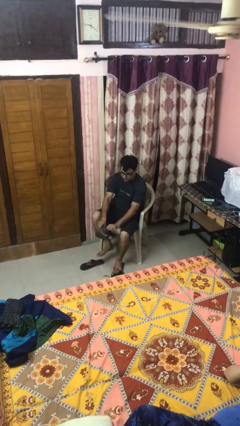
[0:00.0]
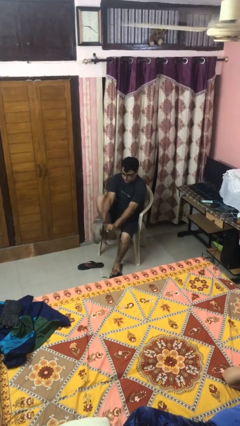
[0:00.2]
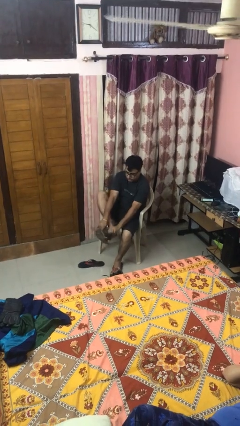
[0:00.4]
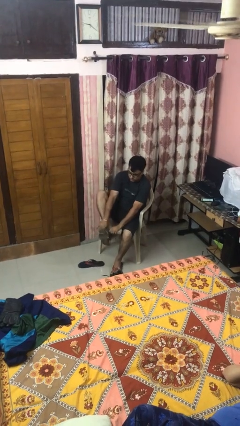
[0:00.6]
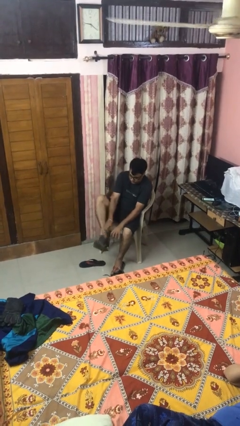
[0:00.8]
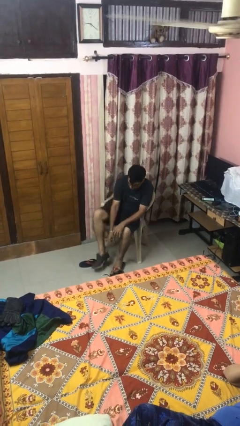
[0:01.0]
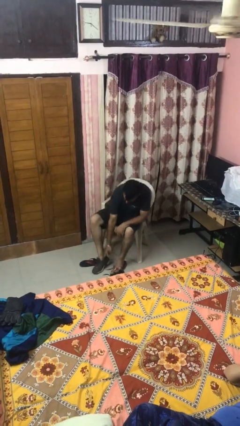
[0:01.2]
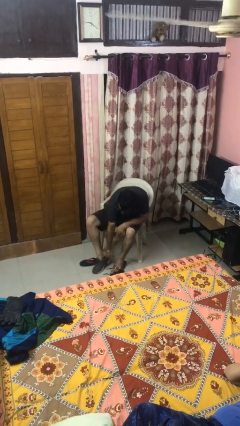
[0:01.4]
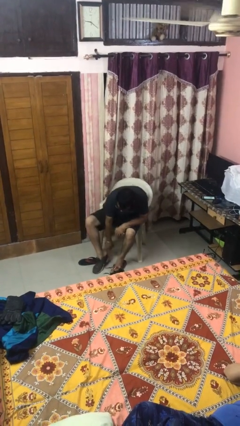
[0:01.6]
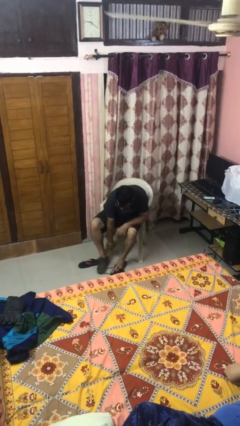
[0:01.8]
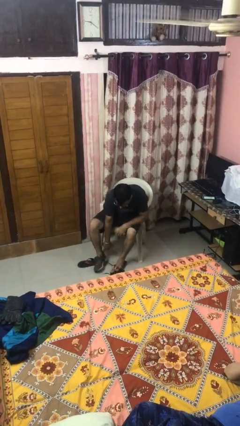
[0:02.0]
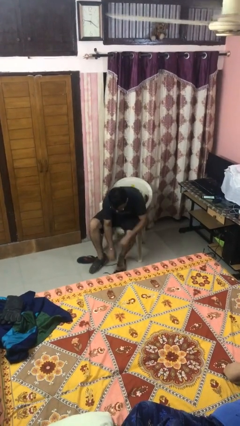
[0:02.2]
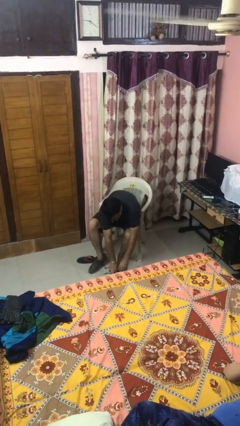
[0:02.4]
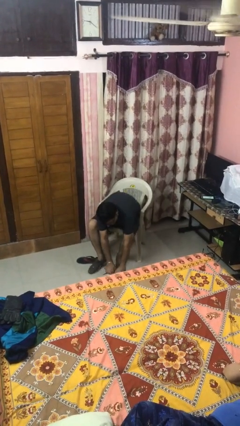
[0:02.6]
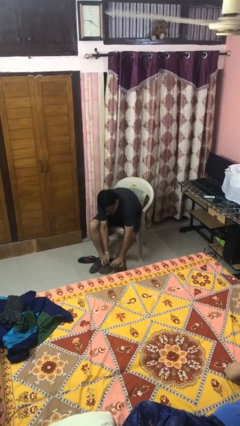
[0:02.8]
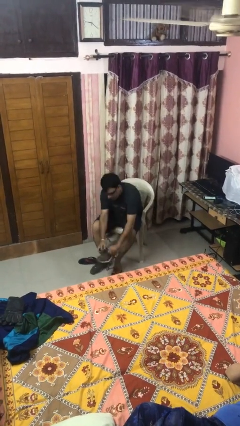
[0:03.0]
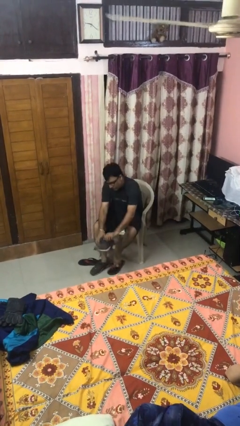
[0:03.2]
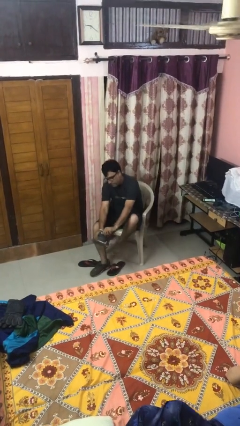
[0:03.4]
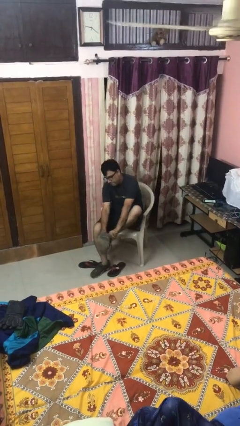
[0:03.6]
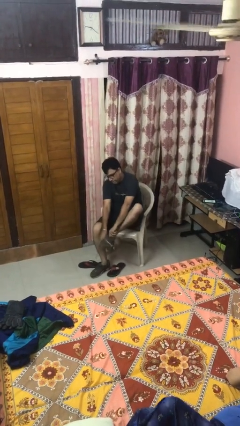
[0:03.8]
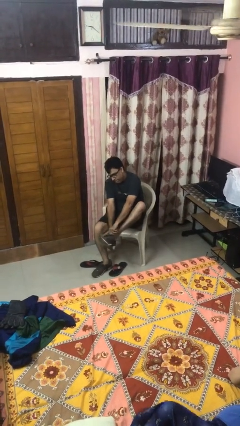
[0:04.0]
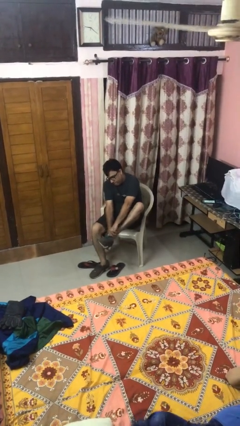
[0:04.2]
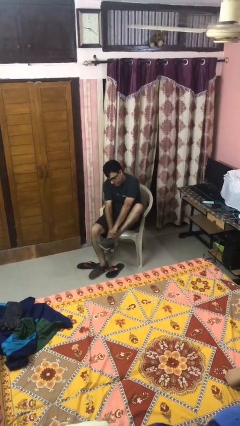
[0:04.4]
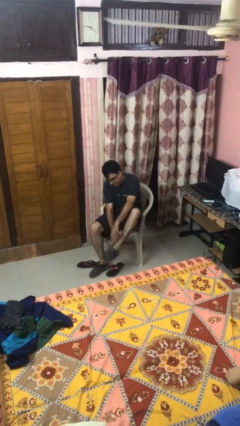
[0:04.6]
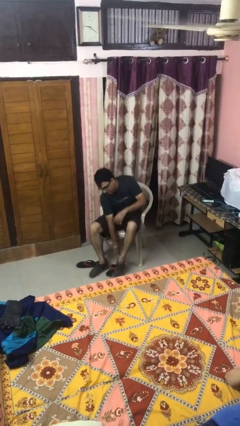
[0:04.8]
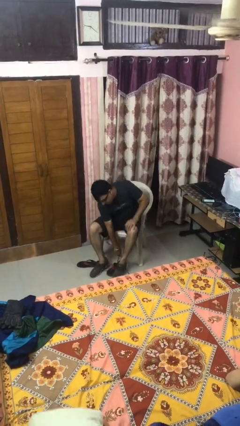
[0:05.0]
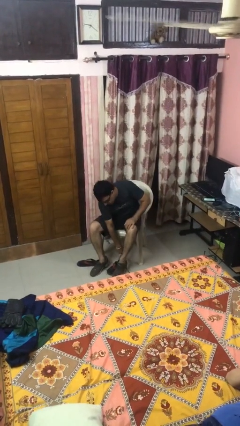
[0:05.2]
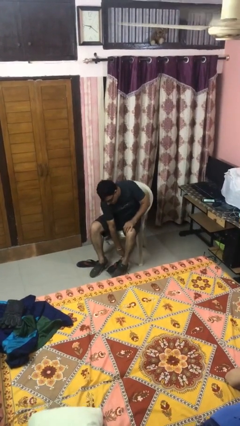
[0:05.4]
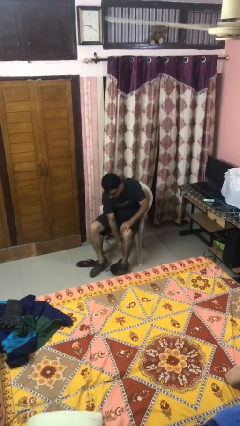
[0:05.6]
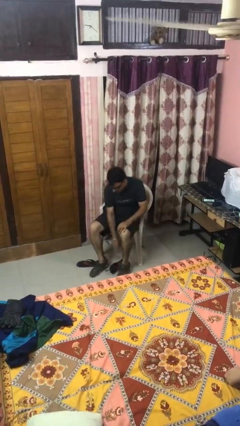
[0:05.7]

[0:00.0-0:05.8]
person puts on shoes

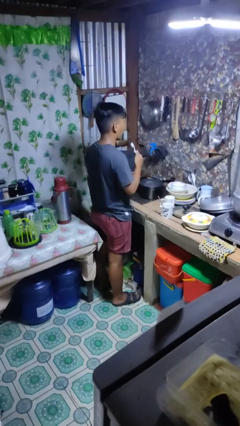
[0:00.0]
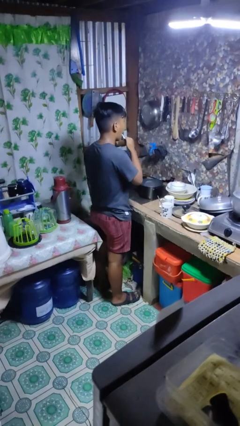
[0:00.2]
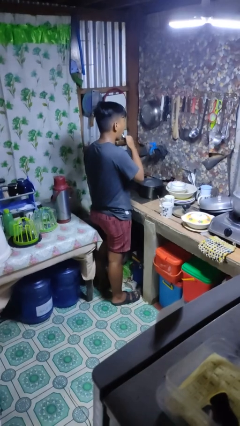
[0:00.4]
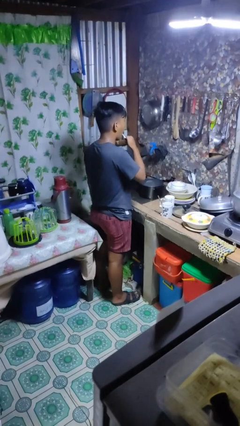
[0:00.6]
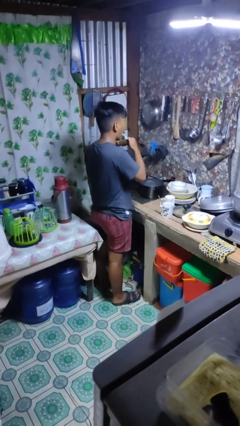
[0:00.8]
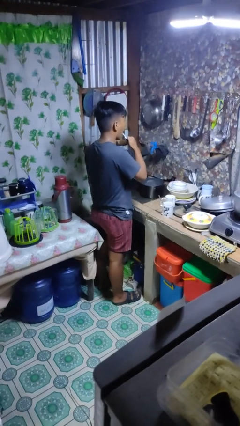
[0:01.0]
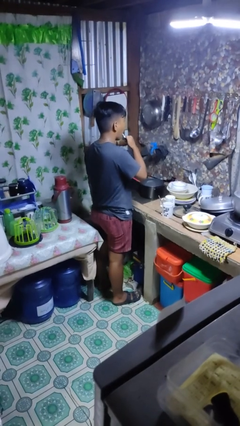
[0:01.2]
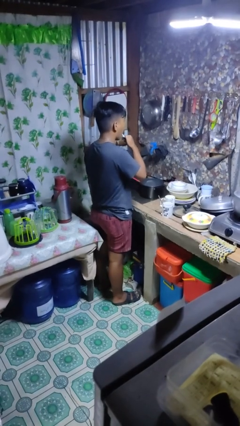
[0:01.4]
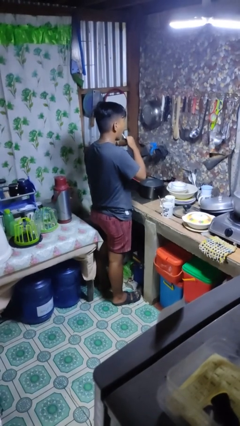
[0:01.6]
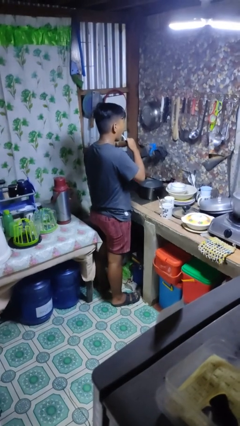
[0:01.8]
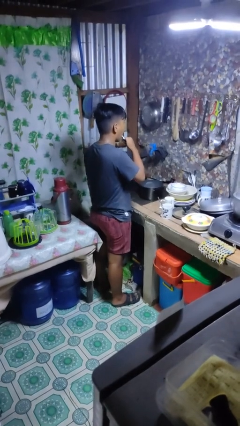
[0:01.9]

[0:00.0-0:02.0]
person brushes teeth

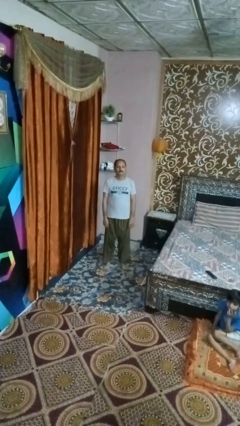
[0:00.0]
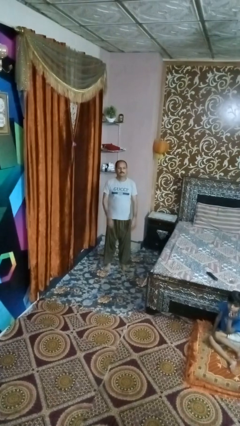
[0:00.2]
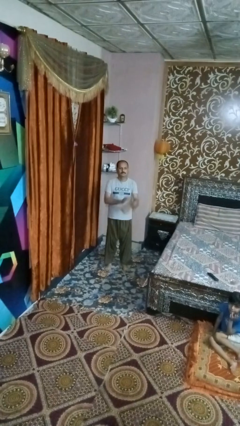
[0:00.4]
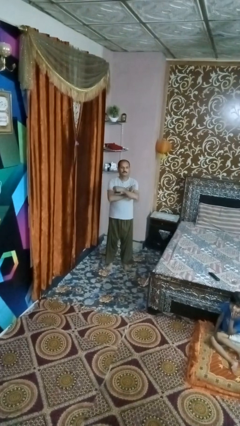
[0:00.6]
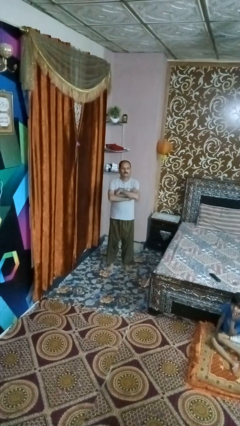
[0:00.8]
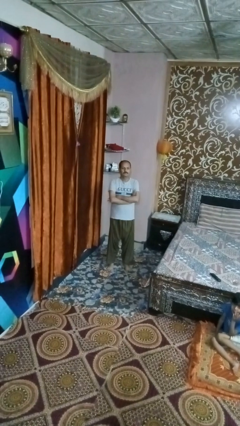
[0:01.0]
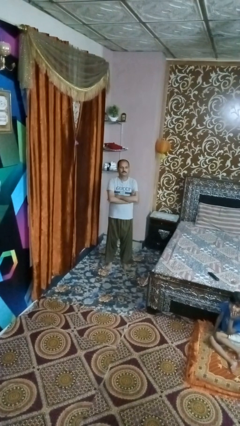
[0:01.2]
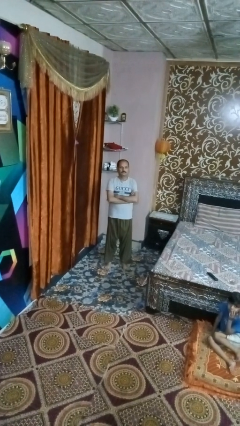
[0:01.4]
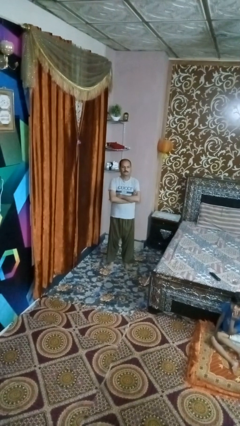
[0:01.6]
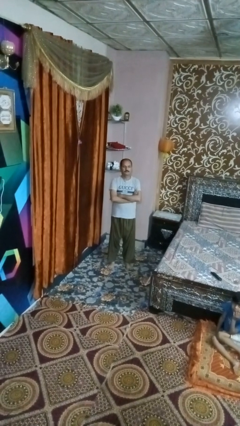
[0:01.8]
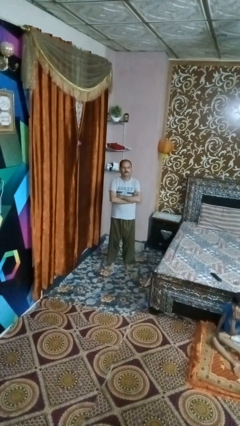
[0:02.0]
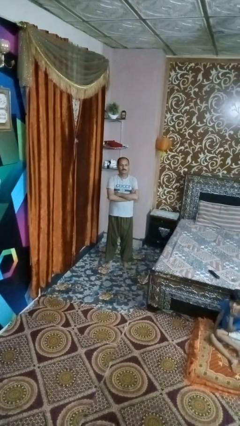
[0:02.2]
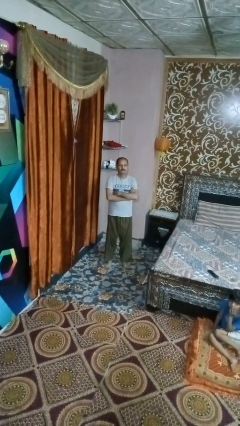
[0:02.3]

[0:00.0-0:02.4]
person crosses arms

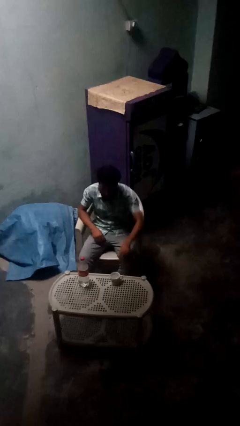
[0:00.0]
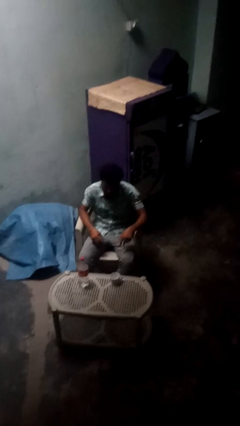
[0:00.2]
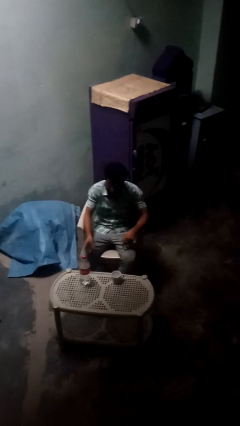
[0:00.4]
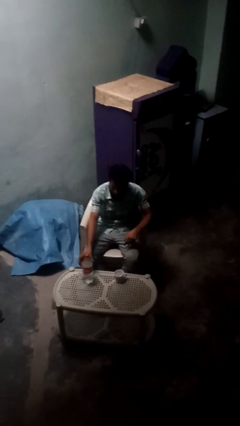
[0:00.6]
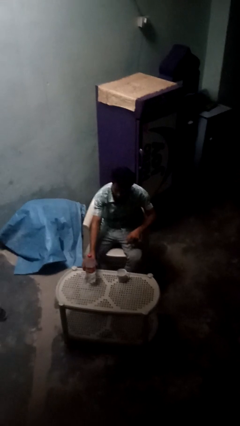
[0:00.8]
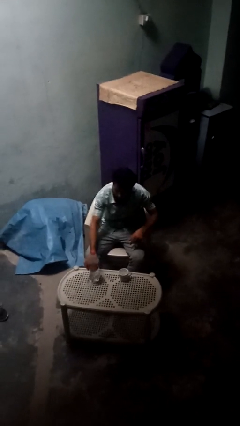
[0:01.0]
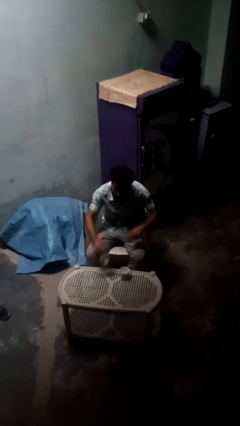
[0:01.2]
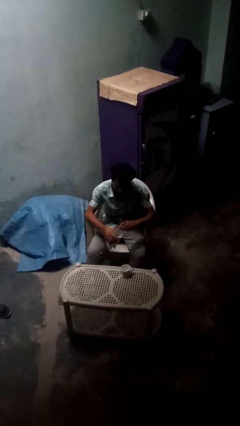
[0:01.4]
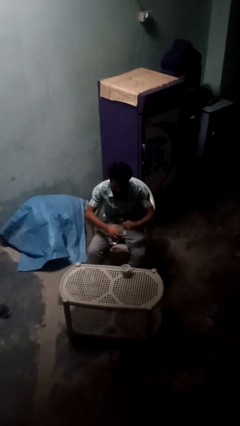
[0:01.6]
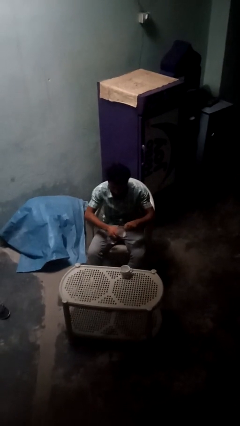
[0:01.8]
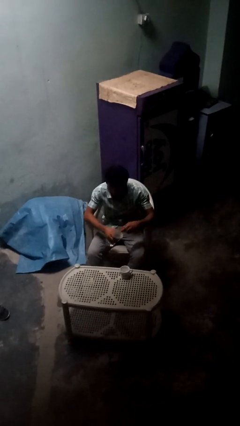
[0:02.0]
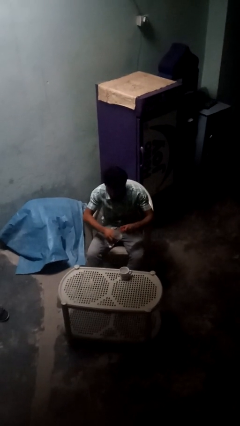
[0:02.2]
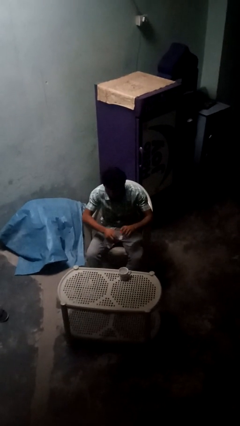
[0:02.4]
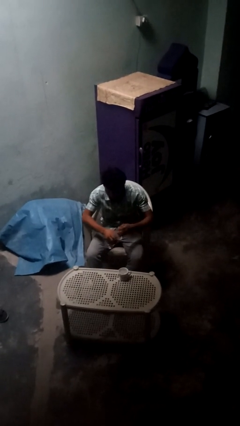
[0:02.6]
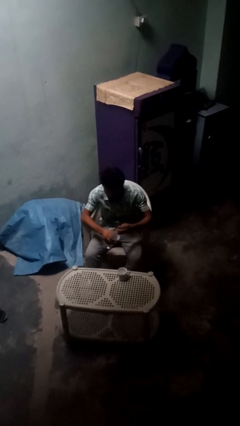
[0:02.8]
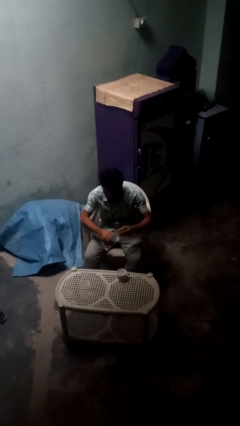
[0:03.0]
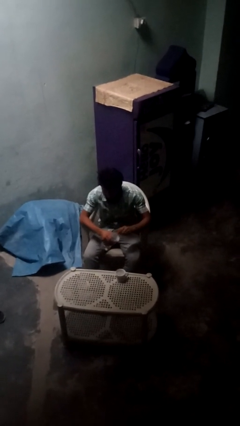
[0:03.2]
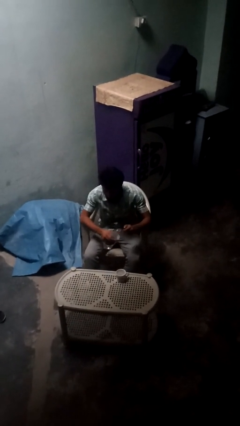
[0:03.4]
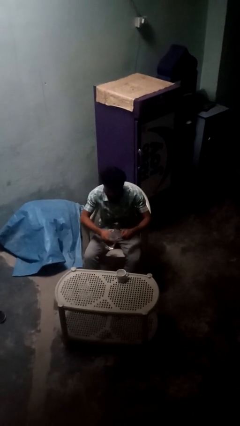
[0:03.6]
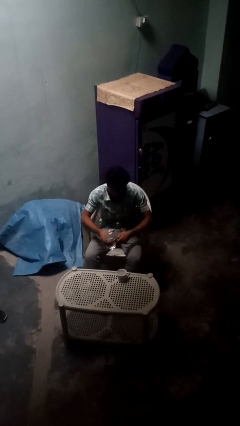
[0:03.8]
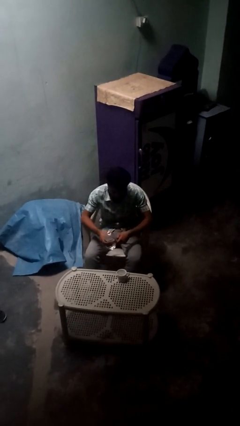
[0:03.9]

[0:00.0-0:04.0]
person unscrews lid from bottle

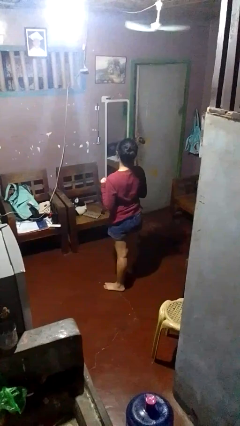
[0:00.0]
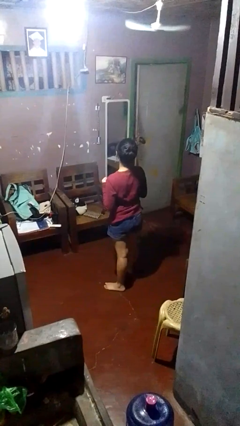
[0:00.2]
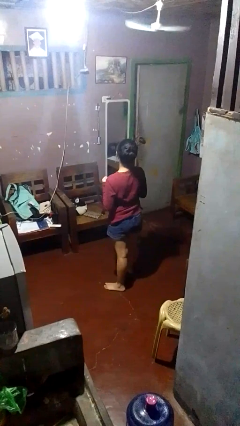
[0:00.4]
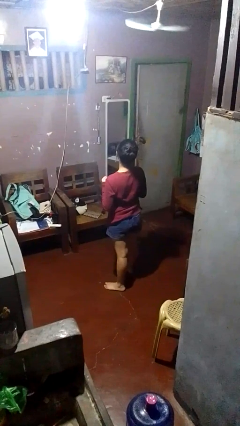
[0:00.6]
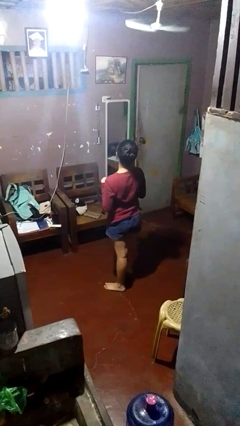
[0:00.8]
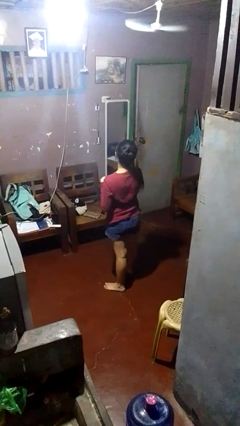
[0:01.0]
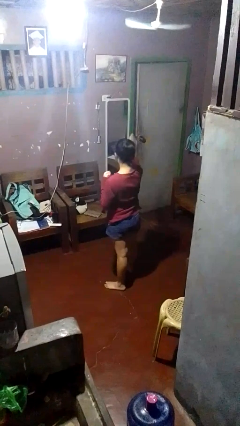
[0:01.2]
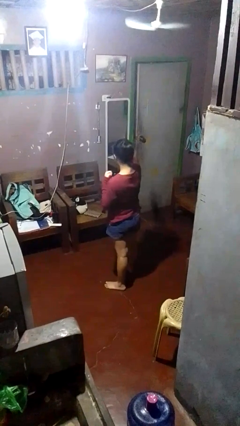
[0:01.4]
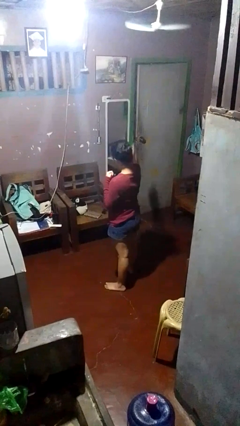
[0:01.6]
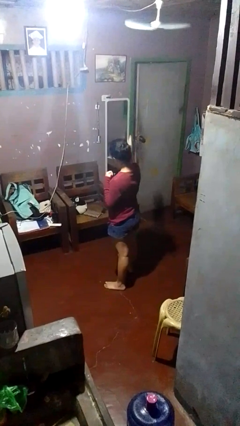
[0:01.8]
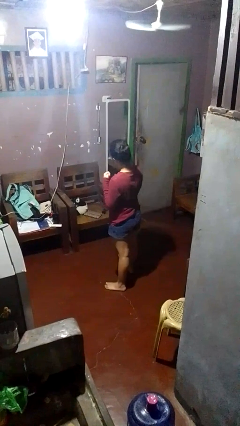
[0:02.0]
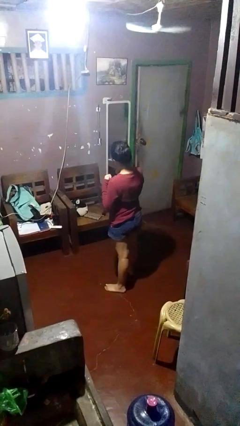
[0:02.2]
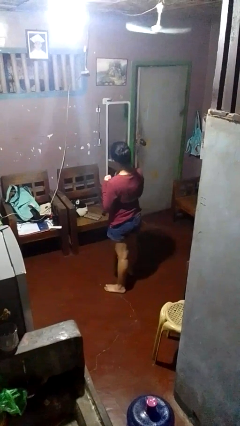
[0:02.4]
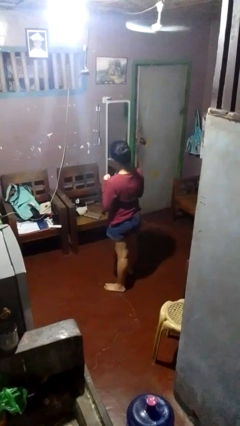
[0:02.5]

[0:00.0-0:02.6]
person karate chop

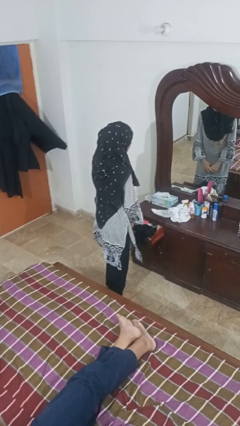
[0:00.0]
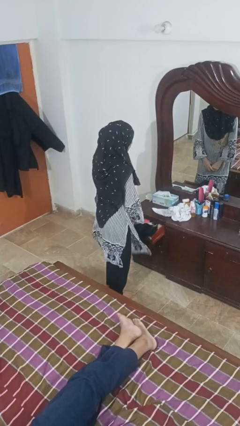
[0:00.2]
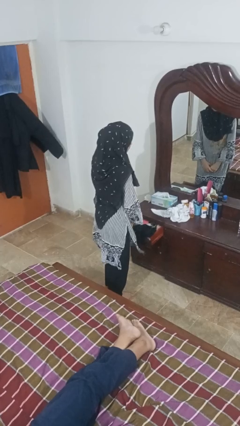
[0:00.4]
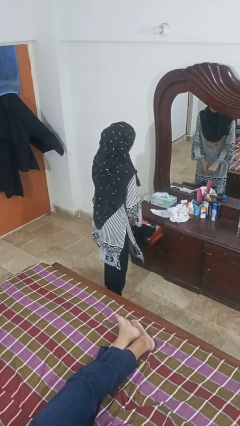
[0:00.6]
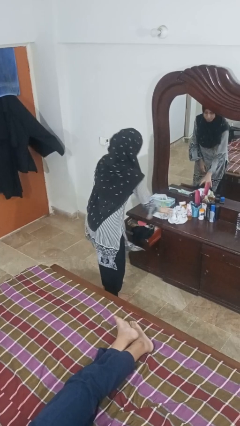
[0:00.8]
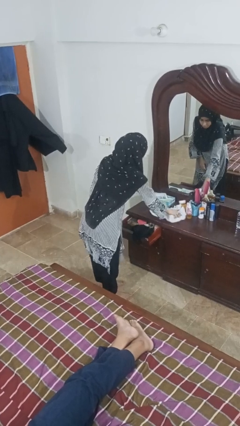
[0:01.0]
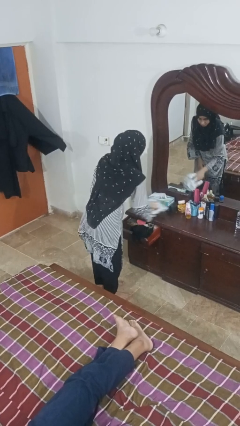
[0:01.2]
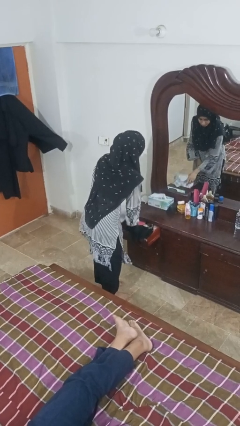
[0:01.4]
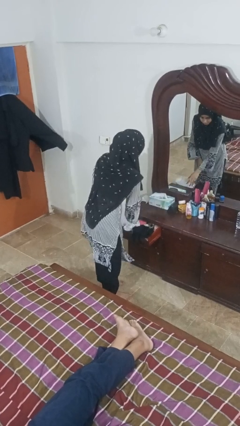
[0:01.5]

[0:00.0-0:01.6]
person puts clothes into dresser
